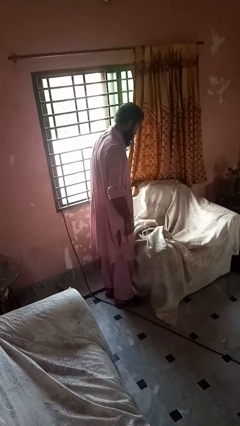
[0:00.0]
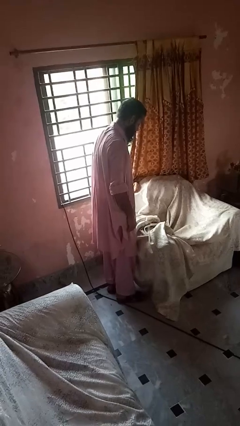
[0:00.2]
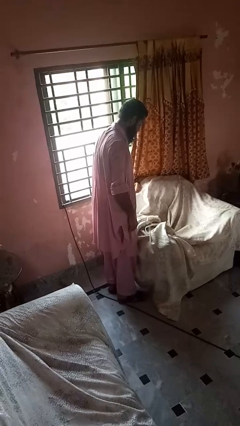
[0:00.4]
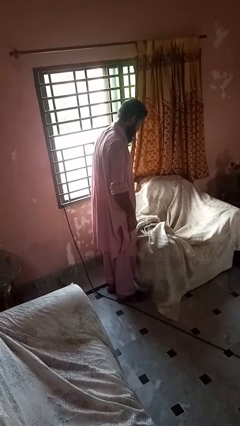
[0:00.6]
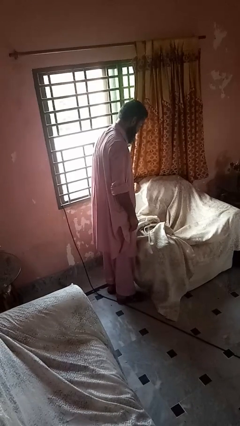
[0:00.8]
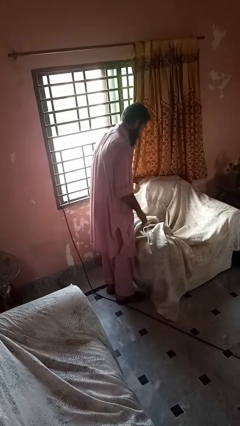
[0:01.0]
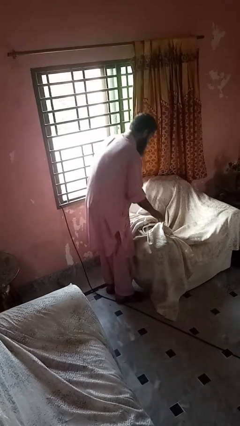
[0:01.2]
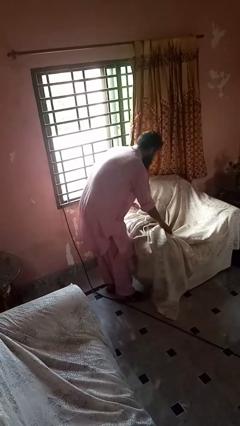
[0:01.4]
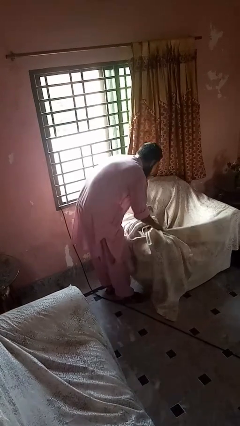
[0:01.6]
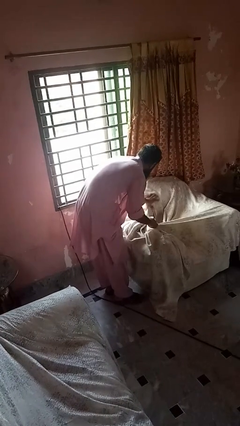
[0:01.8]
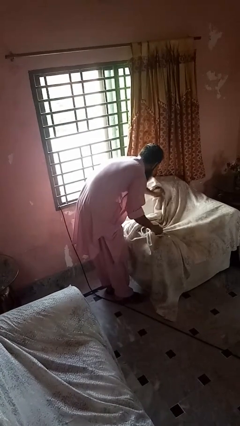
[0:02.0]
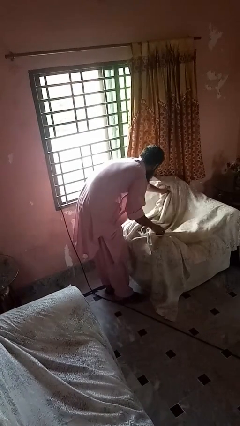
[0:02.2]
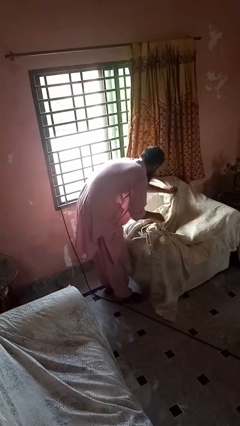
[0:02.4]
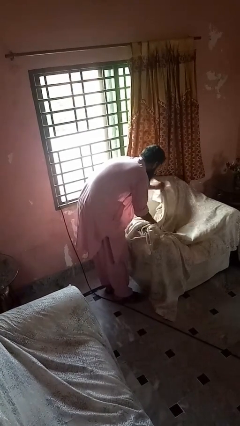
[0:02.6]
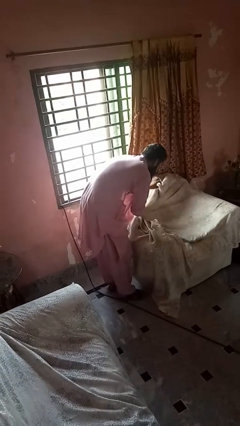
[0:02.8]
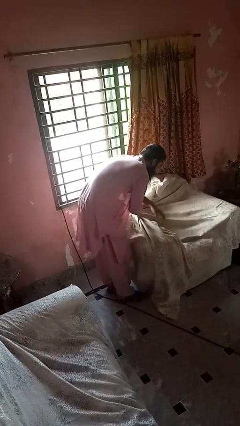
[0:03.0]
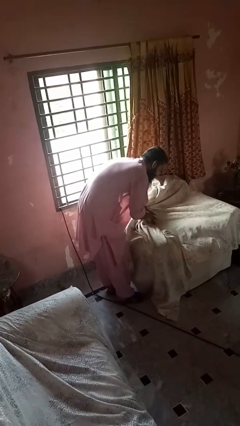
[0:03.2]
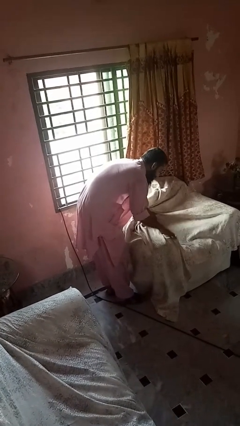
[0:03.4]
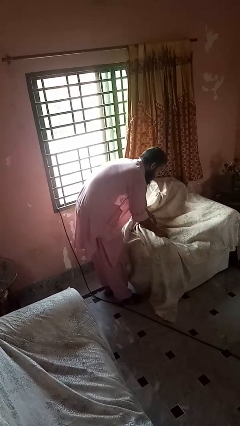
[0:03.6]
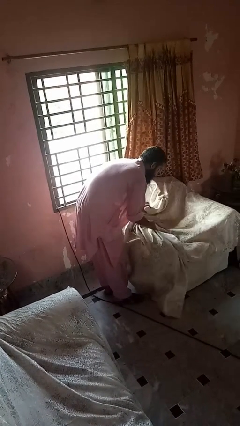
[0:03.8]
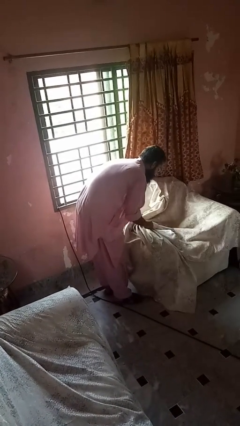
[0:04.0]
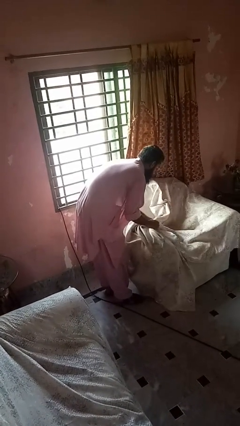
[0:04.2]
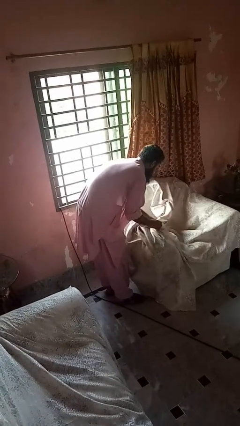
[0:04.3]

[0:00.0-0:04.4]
person searches in couch

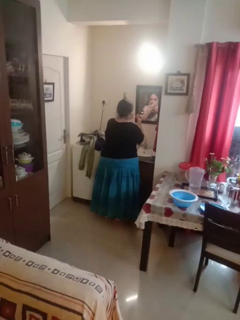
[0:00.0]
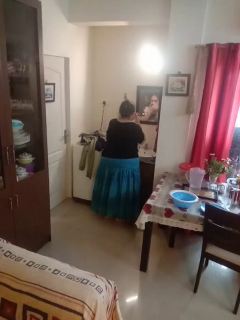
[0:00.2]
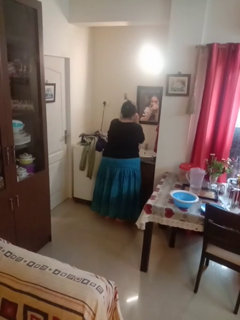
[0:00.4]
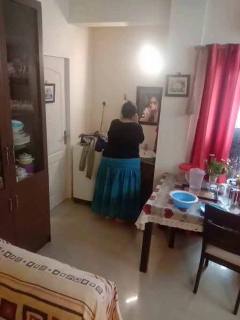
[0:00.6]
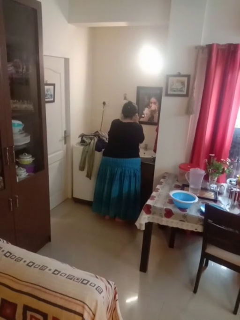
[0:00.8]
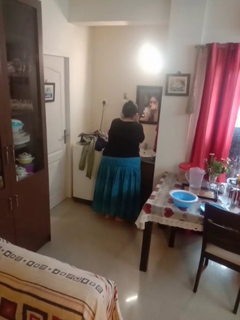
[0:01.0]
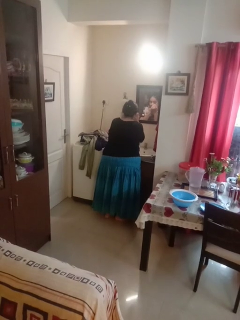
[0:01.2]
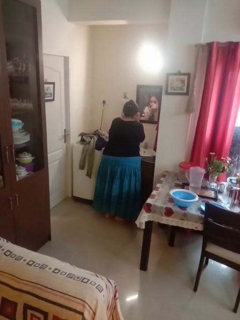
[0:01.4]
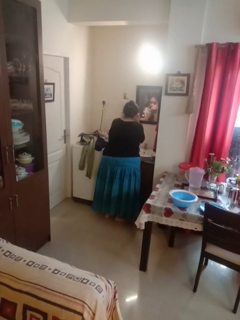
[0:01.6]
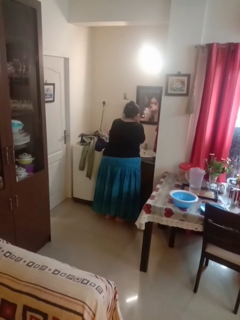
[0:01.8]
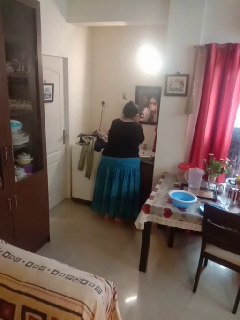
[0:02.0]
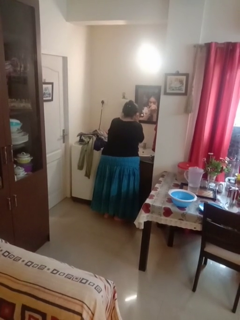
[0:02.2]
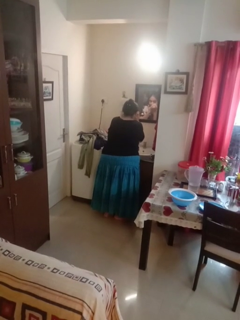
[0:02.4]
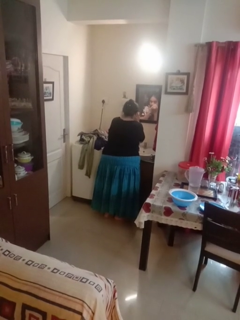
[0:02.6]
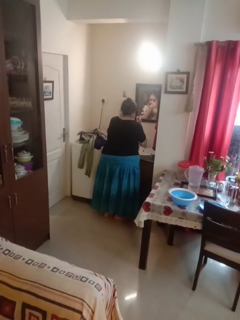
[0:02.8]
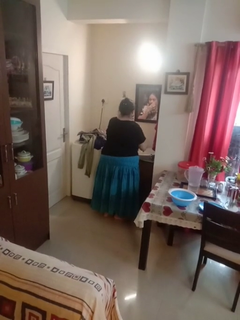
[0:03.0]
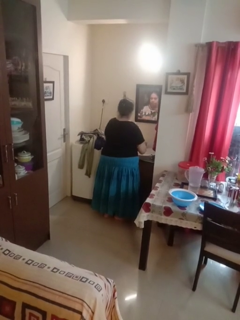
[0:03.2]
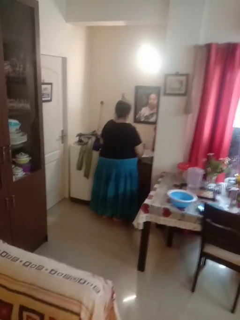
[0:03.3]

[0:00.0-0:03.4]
person applies eye makeup

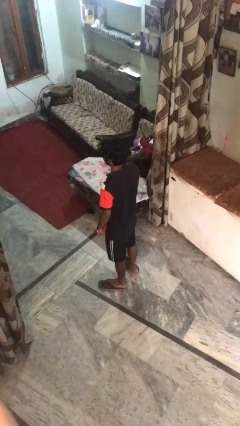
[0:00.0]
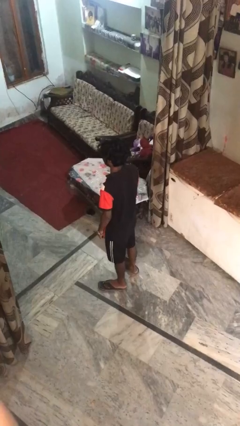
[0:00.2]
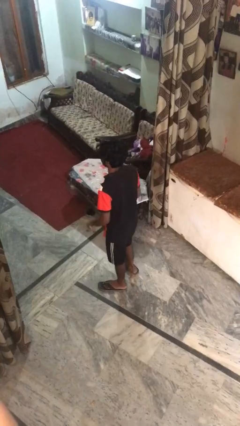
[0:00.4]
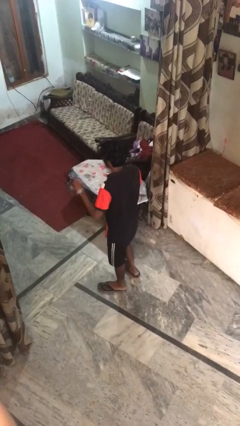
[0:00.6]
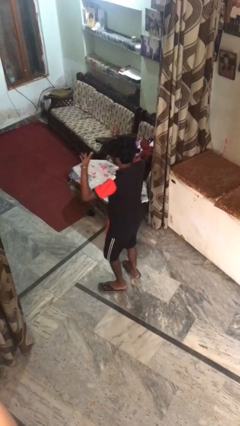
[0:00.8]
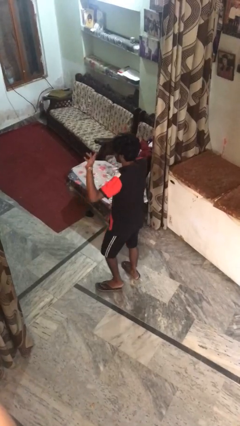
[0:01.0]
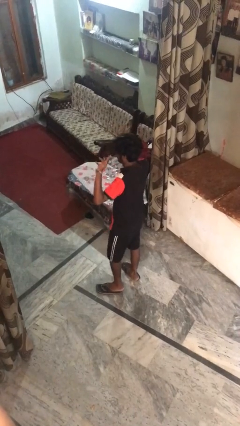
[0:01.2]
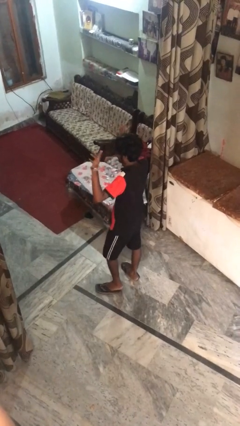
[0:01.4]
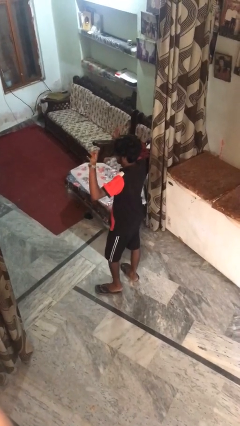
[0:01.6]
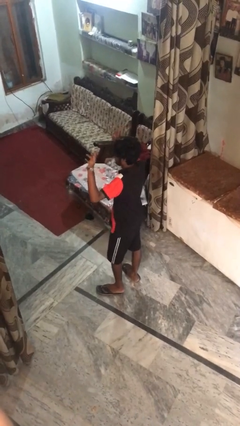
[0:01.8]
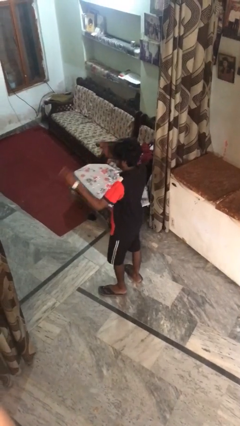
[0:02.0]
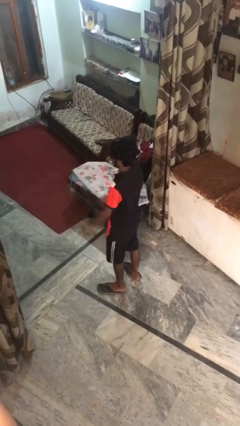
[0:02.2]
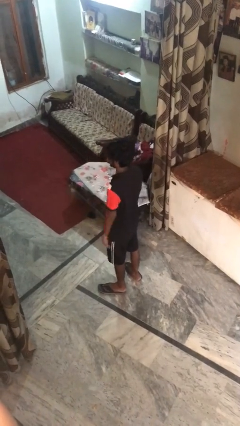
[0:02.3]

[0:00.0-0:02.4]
person dances in place

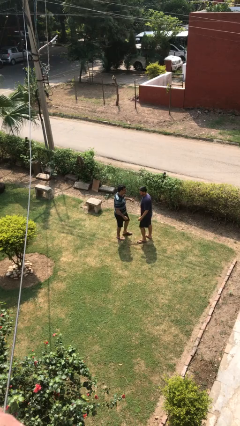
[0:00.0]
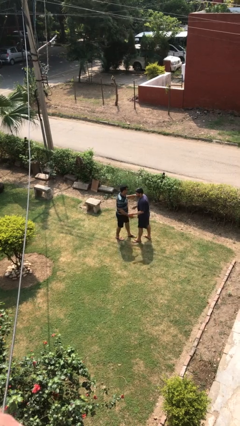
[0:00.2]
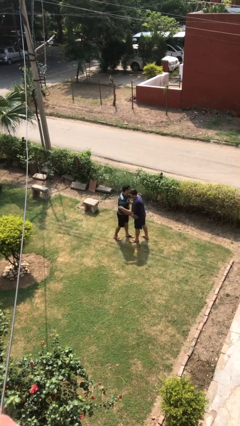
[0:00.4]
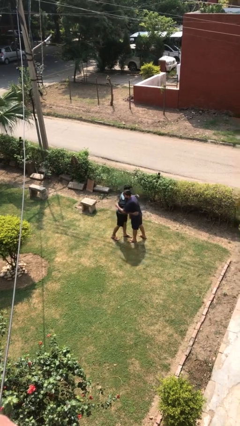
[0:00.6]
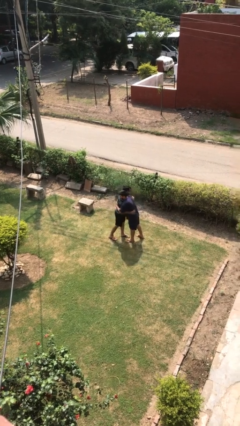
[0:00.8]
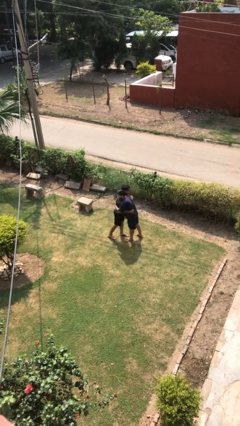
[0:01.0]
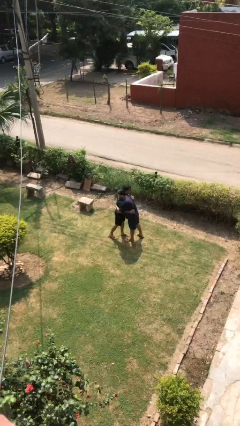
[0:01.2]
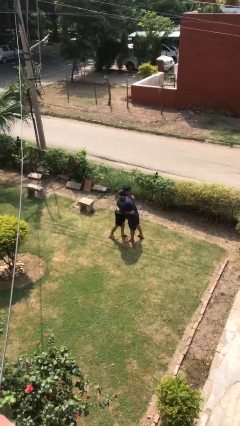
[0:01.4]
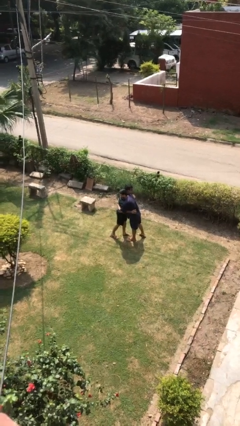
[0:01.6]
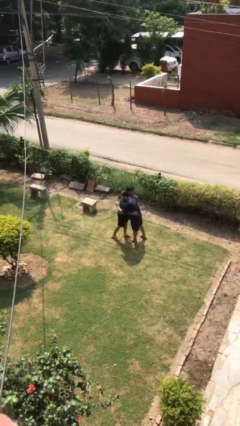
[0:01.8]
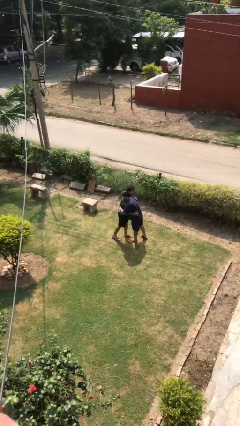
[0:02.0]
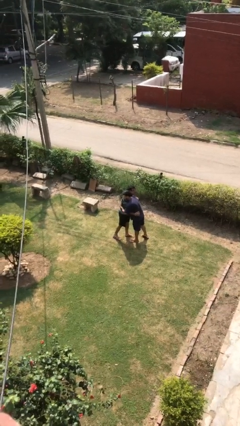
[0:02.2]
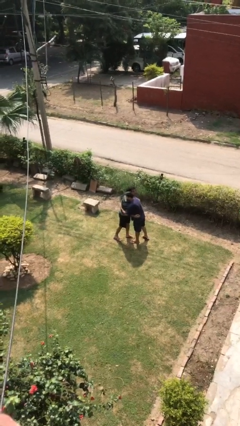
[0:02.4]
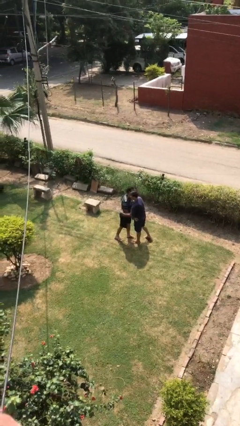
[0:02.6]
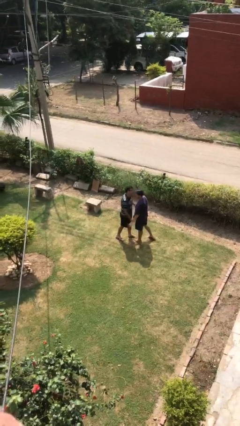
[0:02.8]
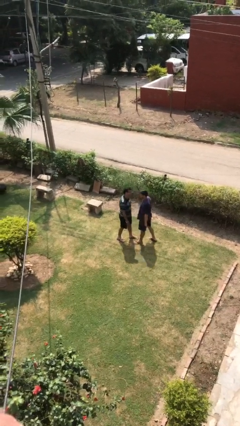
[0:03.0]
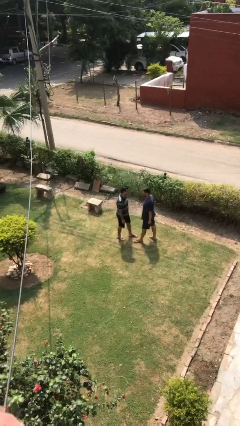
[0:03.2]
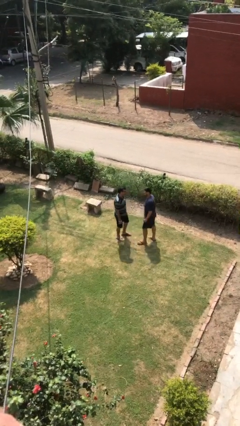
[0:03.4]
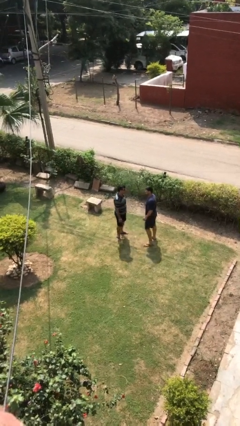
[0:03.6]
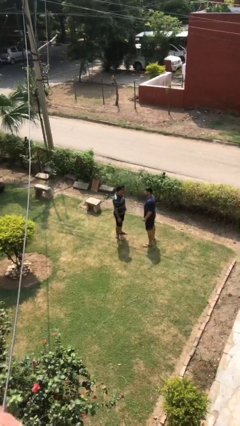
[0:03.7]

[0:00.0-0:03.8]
person embraces person

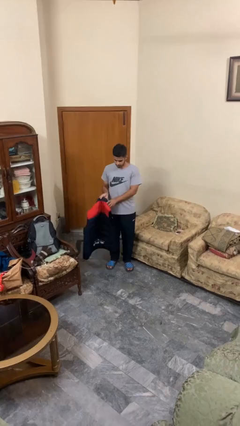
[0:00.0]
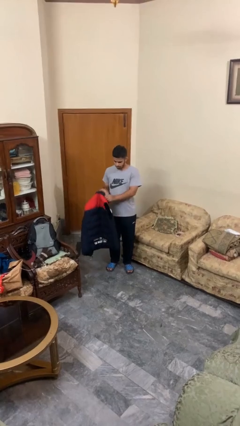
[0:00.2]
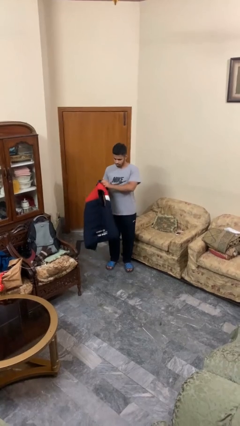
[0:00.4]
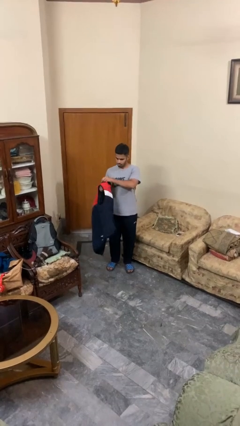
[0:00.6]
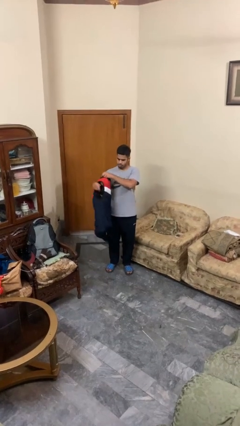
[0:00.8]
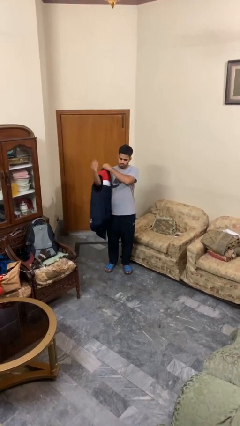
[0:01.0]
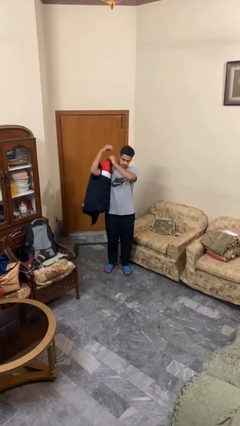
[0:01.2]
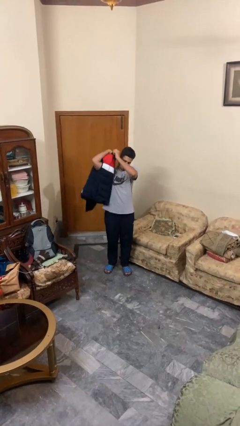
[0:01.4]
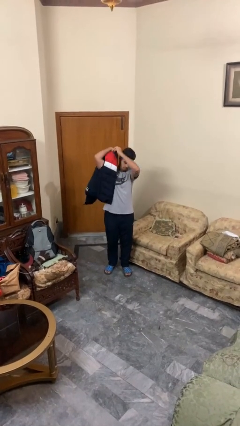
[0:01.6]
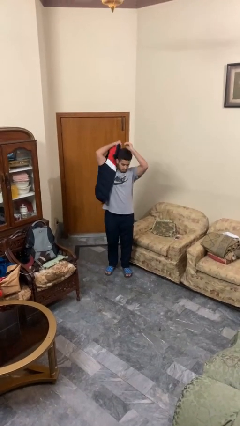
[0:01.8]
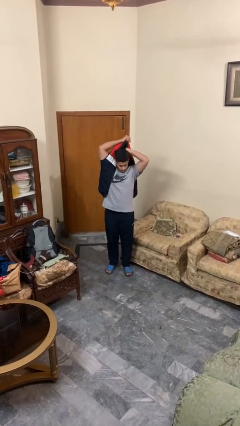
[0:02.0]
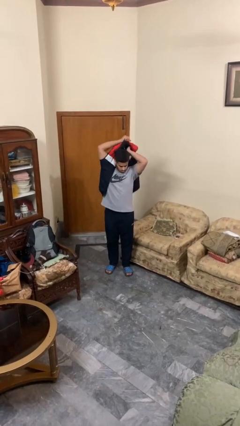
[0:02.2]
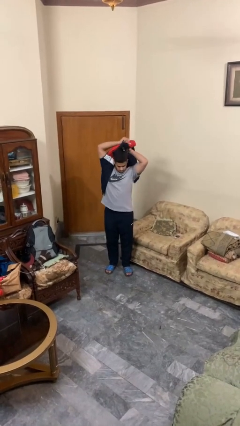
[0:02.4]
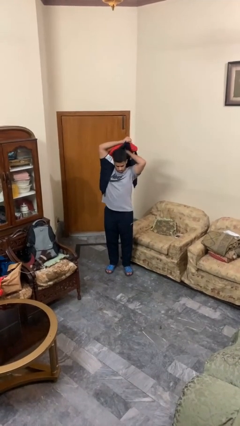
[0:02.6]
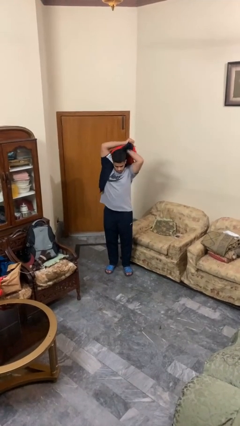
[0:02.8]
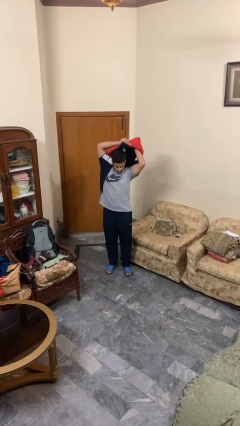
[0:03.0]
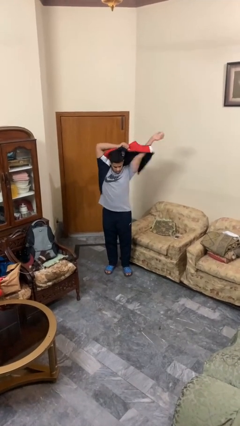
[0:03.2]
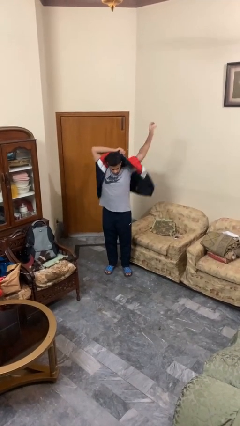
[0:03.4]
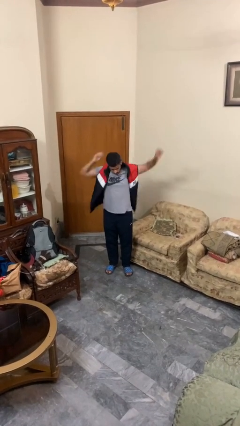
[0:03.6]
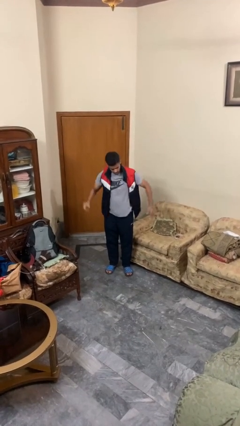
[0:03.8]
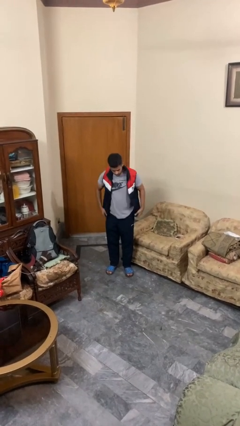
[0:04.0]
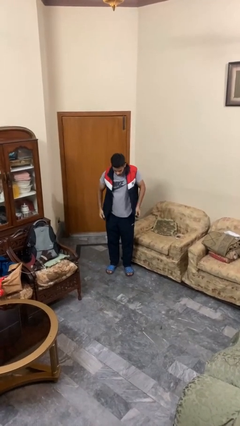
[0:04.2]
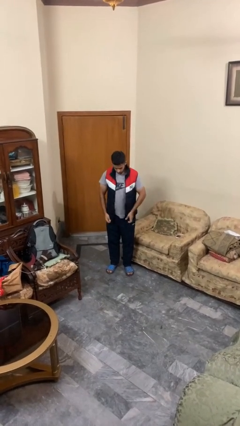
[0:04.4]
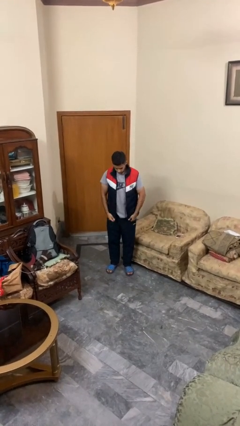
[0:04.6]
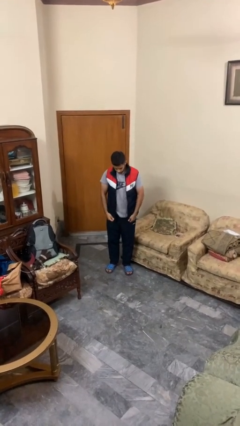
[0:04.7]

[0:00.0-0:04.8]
person puts on jacket
